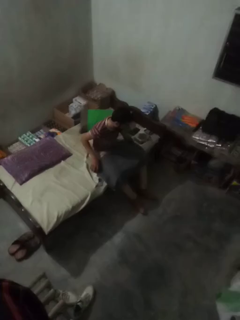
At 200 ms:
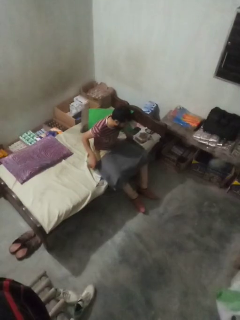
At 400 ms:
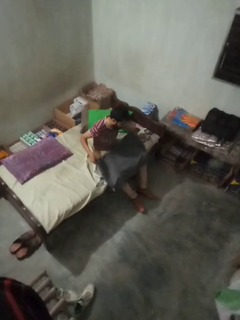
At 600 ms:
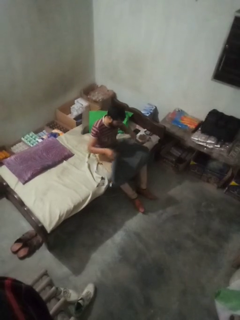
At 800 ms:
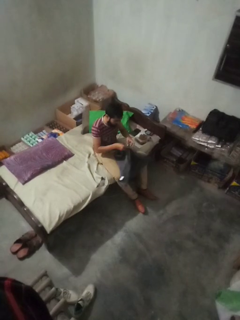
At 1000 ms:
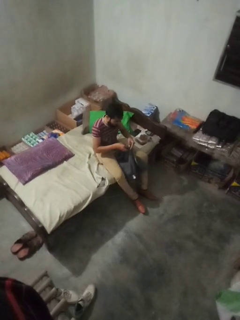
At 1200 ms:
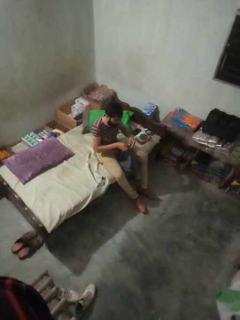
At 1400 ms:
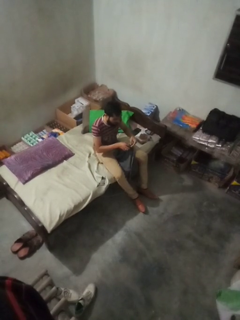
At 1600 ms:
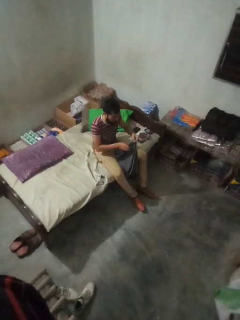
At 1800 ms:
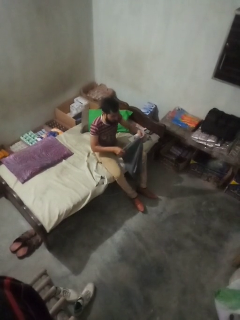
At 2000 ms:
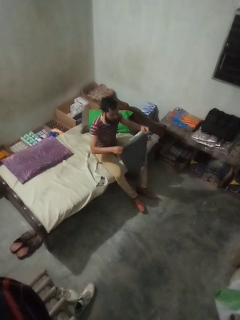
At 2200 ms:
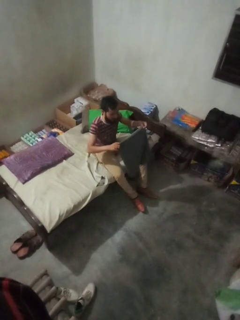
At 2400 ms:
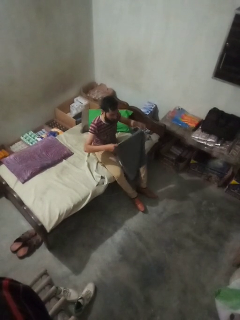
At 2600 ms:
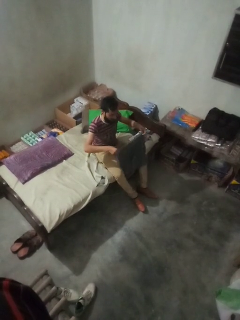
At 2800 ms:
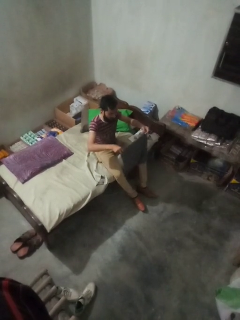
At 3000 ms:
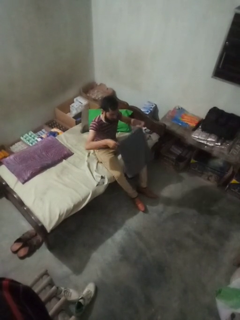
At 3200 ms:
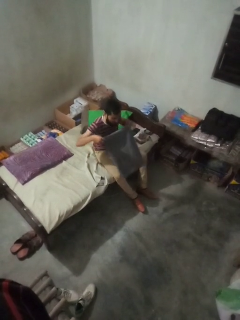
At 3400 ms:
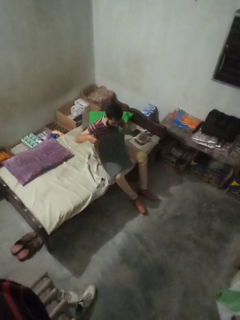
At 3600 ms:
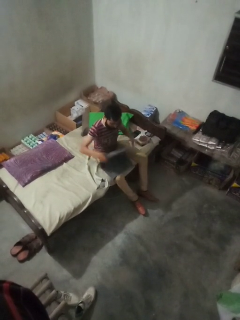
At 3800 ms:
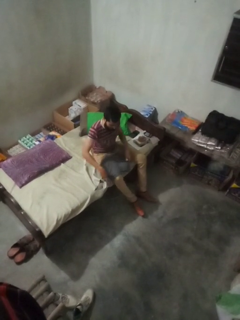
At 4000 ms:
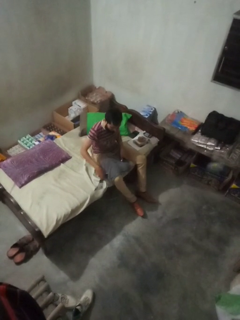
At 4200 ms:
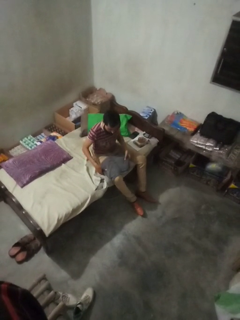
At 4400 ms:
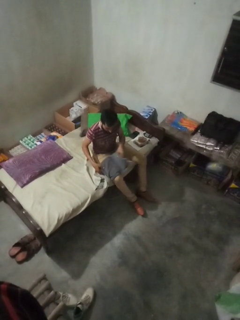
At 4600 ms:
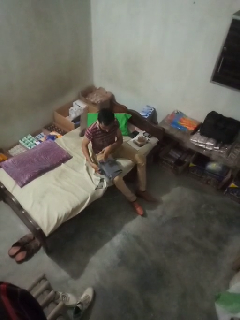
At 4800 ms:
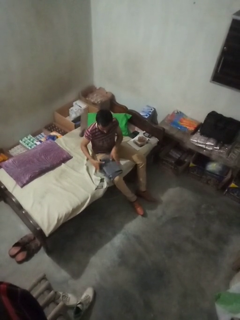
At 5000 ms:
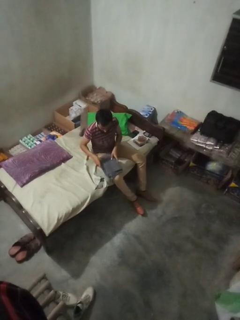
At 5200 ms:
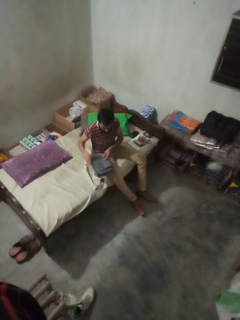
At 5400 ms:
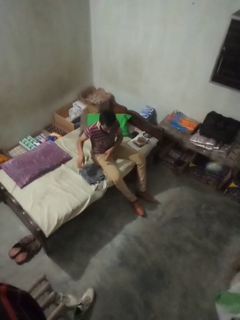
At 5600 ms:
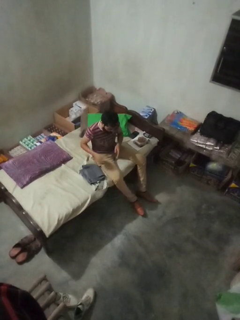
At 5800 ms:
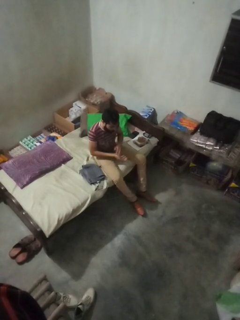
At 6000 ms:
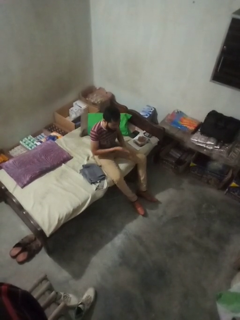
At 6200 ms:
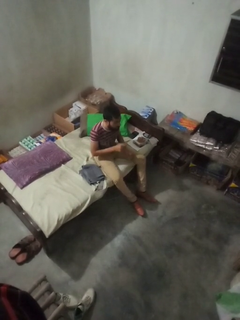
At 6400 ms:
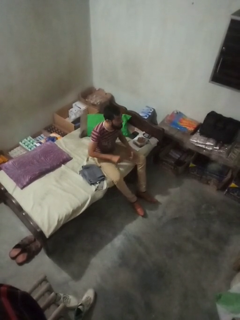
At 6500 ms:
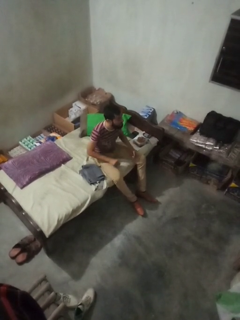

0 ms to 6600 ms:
person folds towel

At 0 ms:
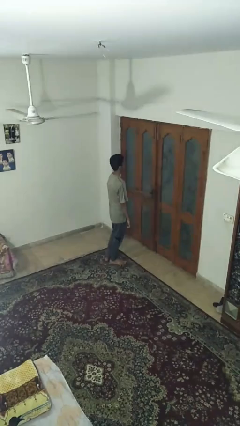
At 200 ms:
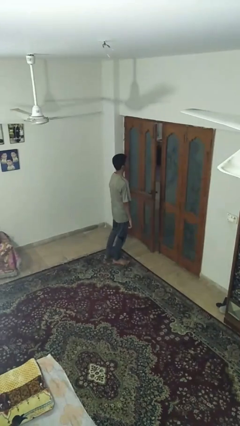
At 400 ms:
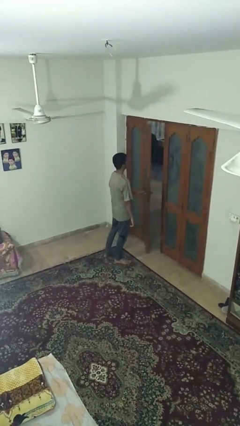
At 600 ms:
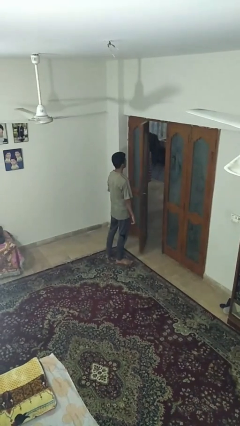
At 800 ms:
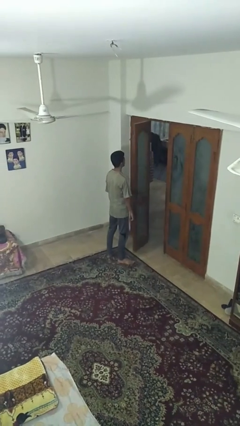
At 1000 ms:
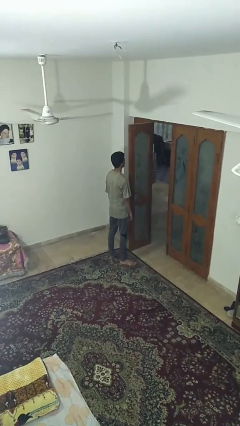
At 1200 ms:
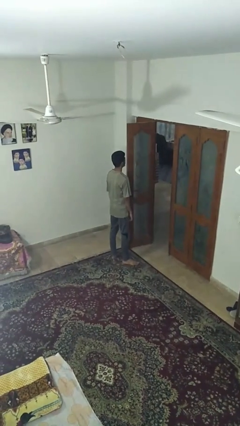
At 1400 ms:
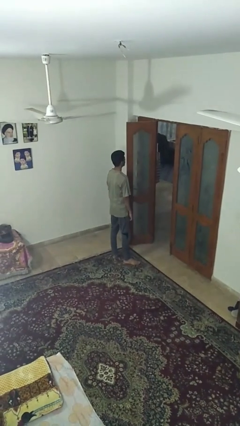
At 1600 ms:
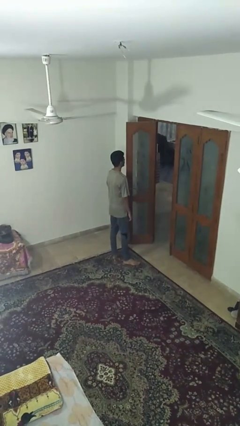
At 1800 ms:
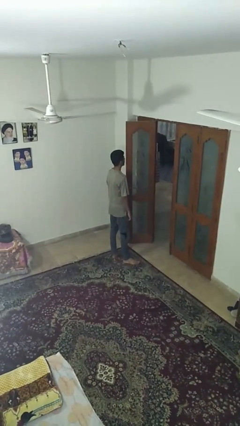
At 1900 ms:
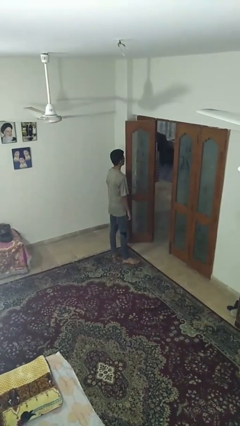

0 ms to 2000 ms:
person opens facility door

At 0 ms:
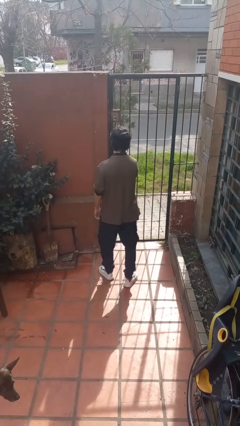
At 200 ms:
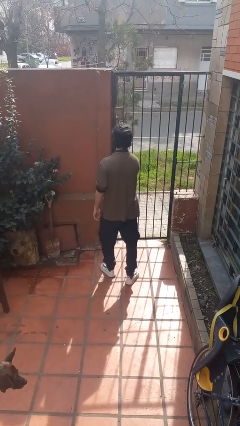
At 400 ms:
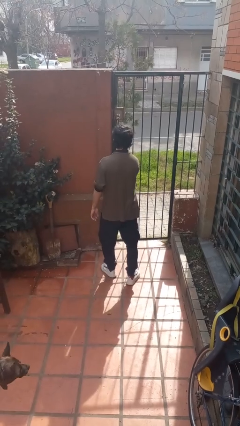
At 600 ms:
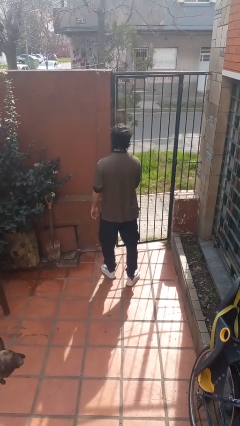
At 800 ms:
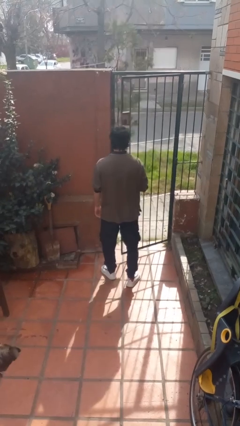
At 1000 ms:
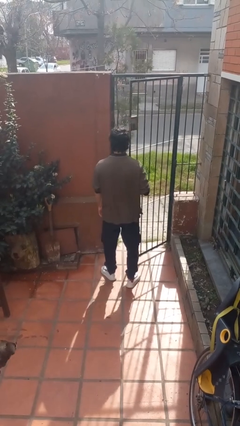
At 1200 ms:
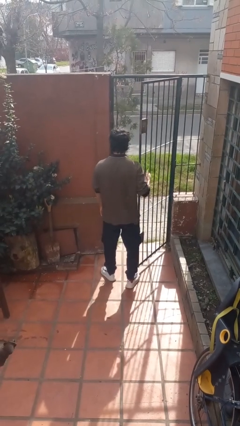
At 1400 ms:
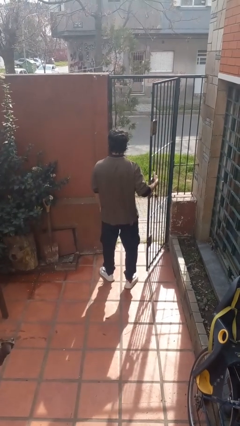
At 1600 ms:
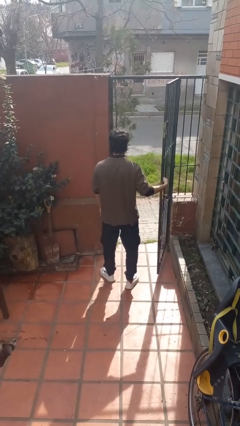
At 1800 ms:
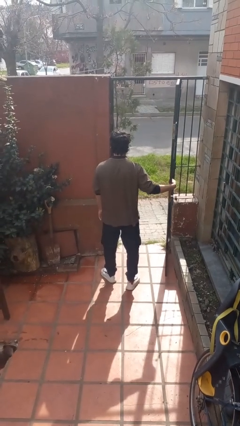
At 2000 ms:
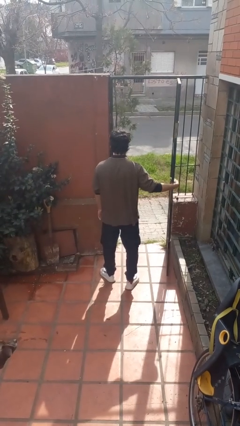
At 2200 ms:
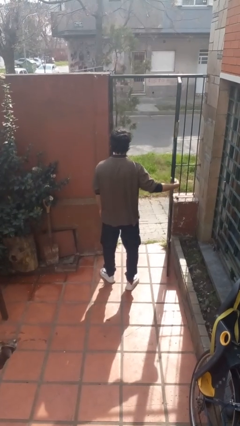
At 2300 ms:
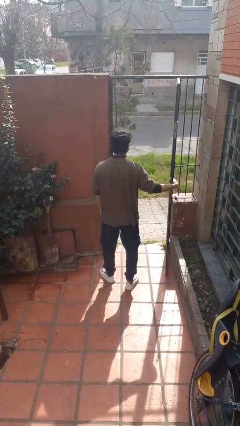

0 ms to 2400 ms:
person opens gate

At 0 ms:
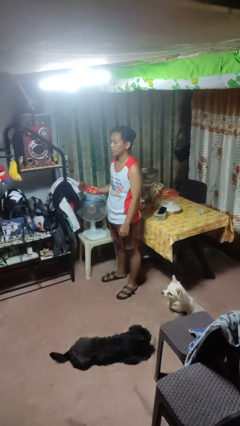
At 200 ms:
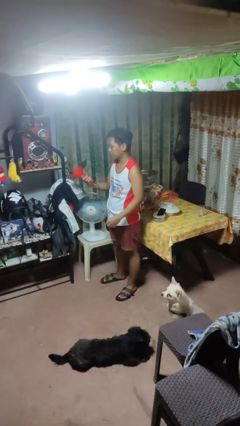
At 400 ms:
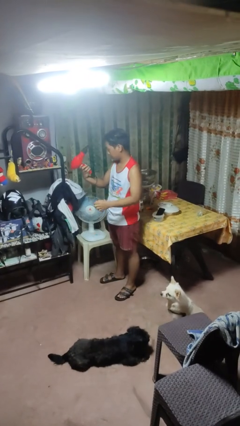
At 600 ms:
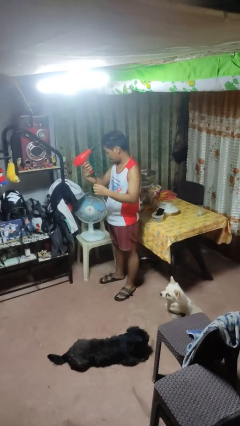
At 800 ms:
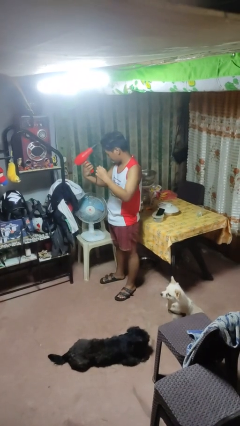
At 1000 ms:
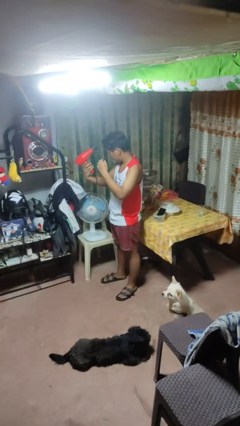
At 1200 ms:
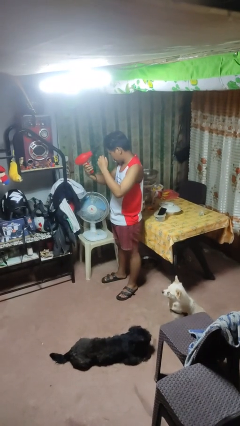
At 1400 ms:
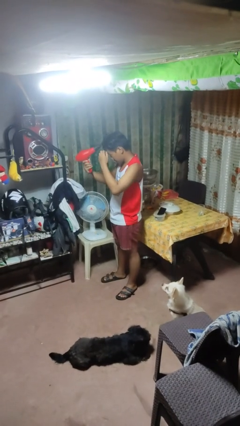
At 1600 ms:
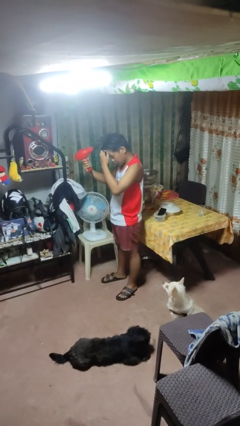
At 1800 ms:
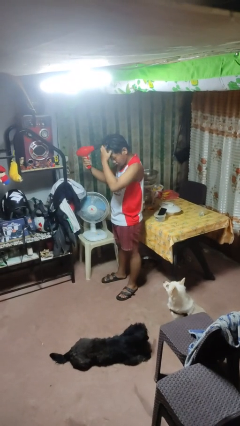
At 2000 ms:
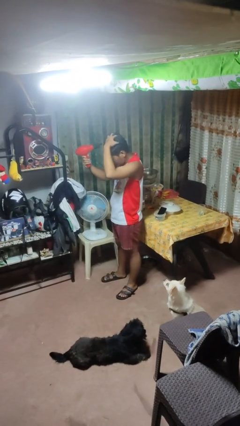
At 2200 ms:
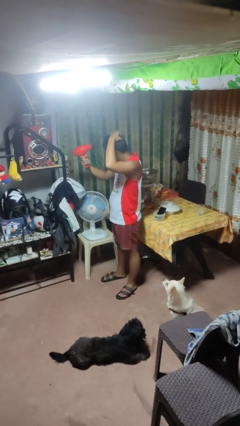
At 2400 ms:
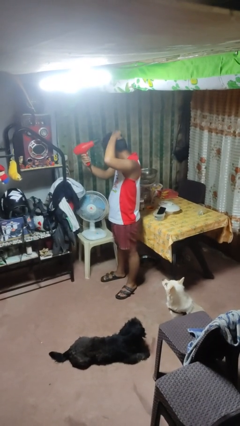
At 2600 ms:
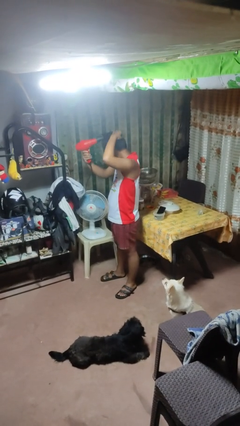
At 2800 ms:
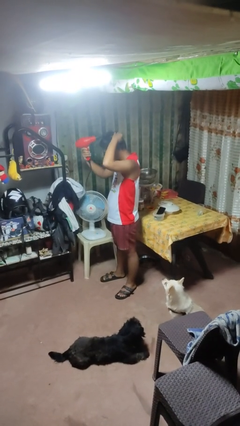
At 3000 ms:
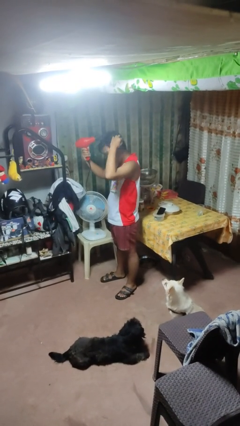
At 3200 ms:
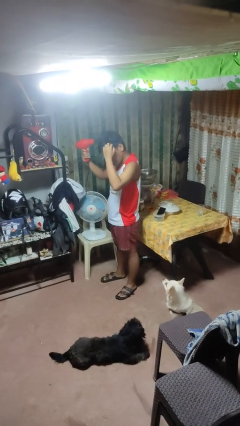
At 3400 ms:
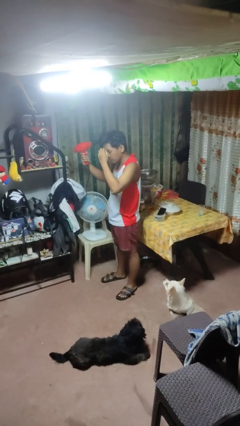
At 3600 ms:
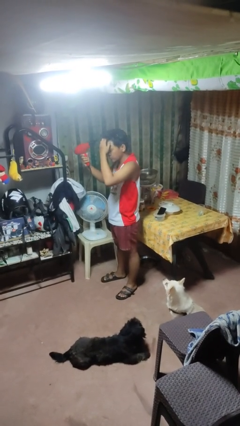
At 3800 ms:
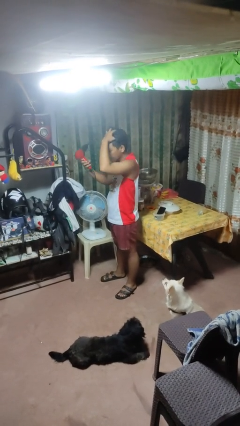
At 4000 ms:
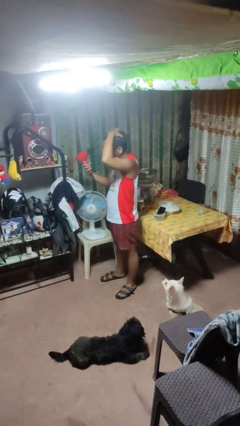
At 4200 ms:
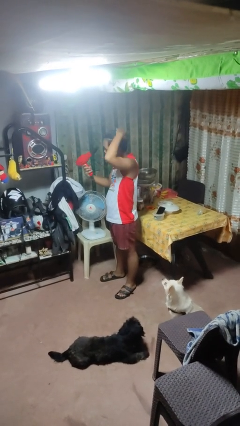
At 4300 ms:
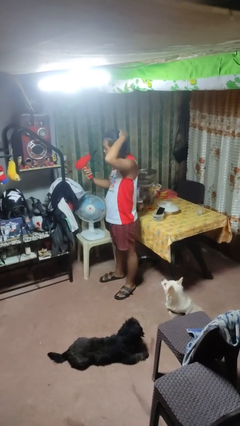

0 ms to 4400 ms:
person dries hair with hairdryer

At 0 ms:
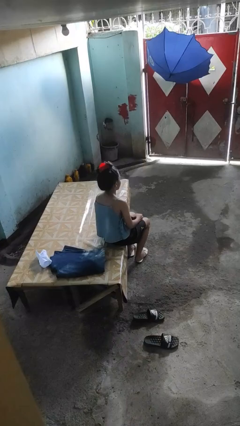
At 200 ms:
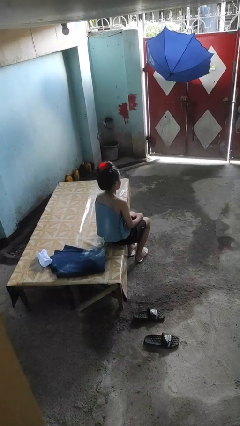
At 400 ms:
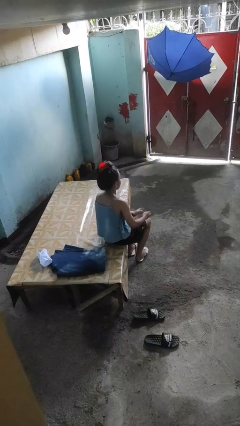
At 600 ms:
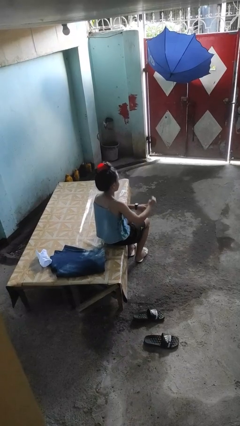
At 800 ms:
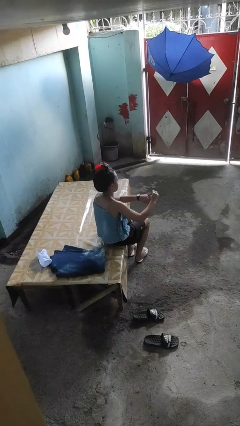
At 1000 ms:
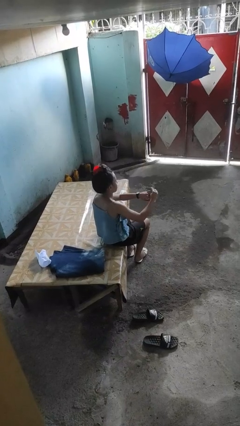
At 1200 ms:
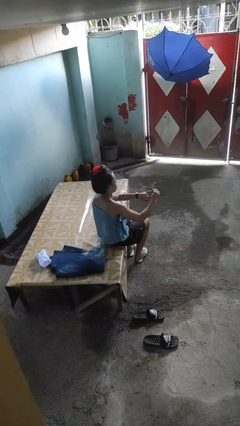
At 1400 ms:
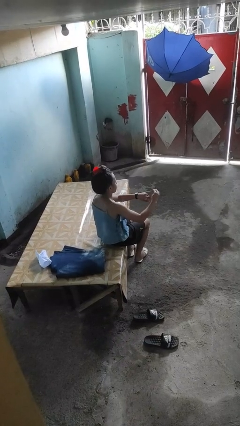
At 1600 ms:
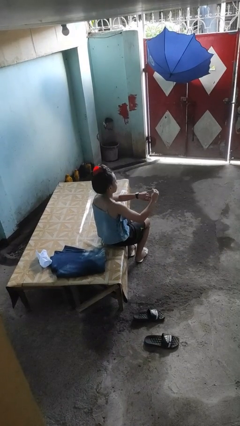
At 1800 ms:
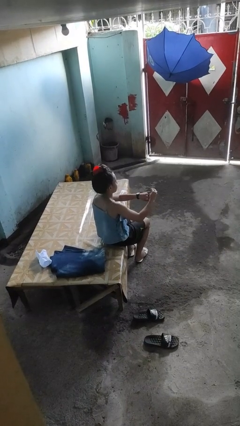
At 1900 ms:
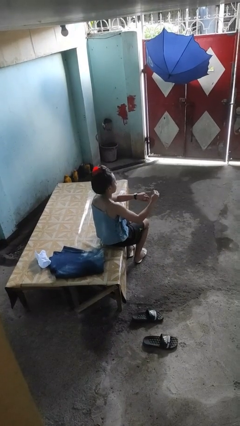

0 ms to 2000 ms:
person clips fingernails

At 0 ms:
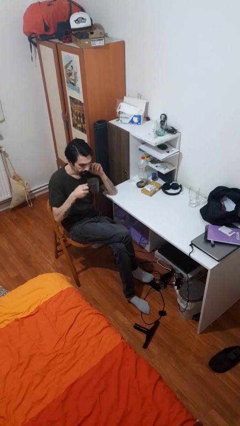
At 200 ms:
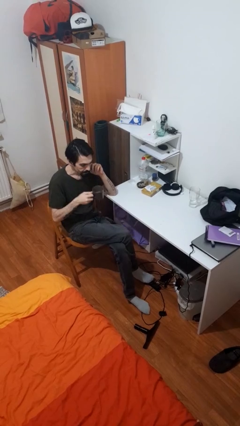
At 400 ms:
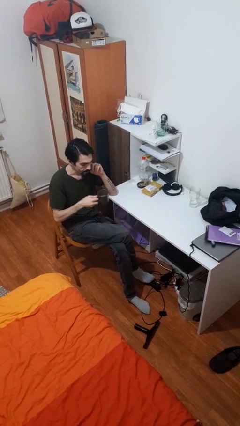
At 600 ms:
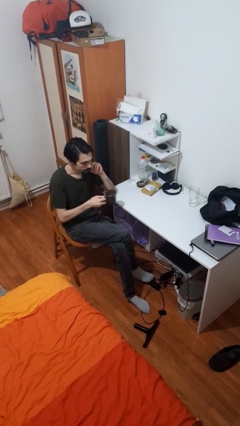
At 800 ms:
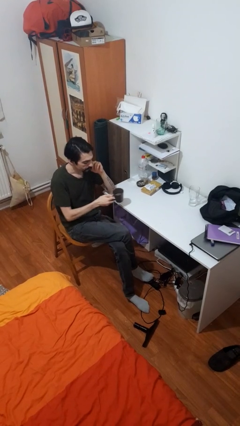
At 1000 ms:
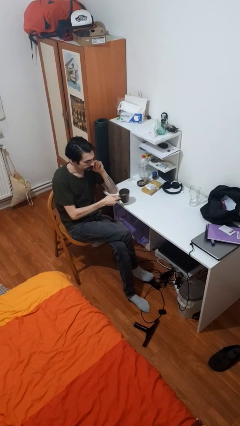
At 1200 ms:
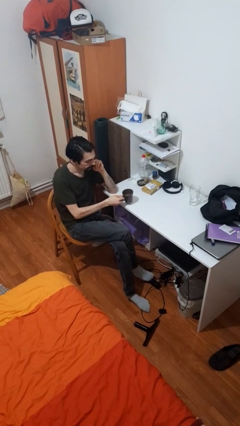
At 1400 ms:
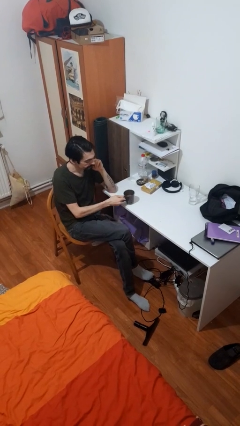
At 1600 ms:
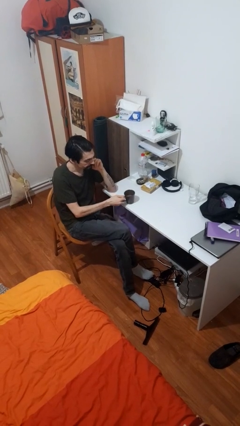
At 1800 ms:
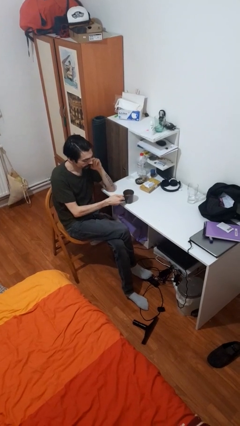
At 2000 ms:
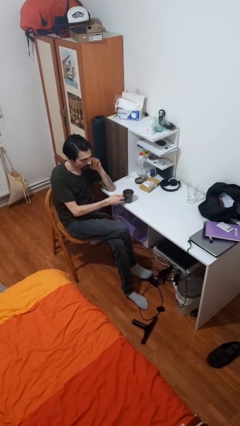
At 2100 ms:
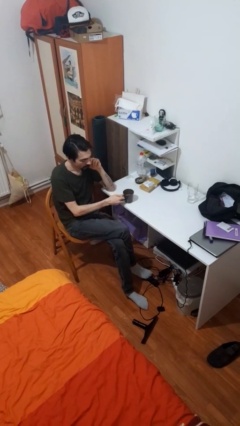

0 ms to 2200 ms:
person puts down object on table
